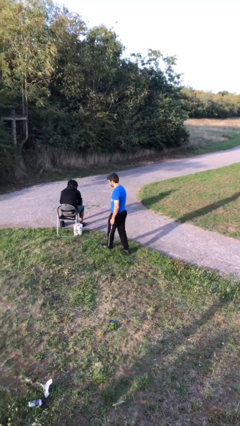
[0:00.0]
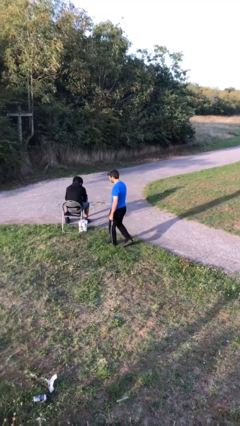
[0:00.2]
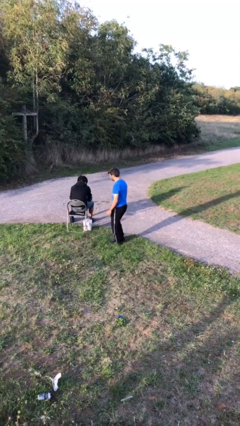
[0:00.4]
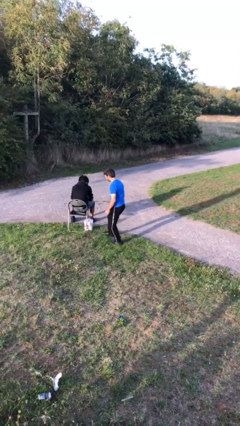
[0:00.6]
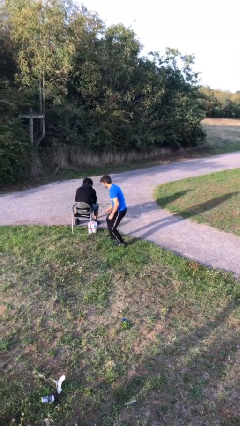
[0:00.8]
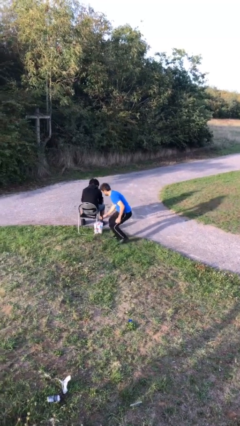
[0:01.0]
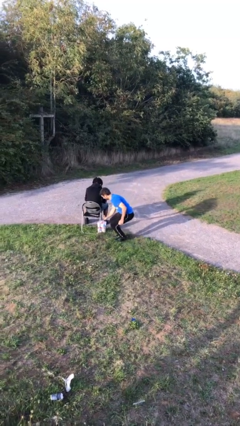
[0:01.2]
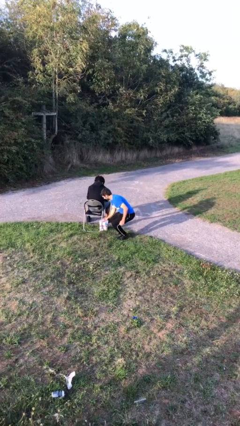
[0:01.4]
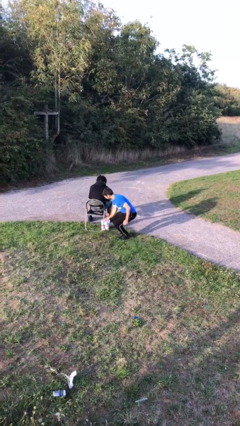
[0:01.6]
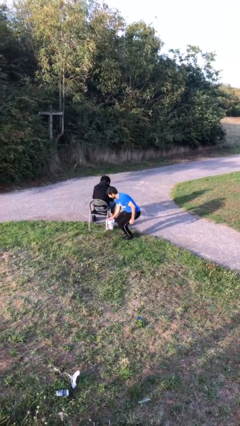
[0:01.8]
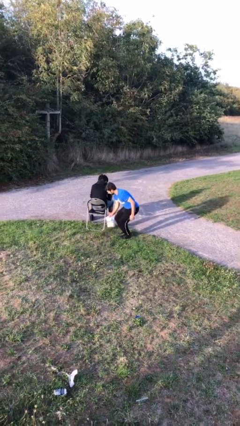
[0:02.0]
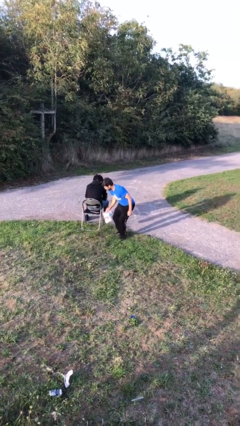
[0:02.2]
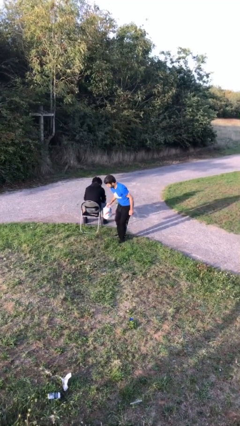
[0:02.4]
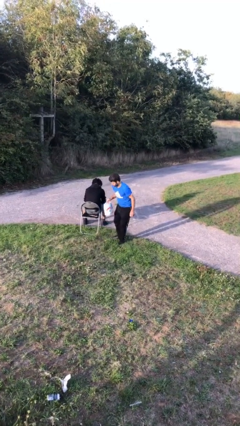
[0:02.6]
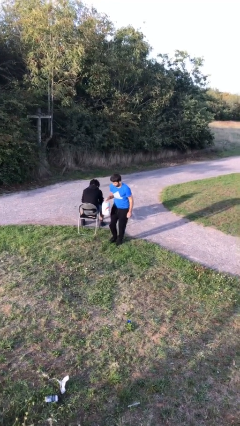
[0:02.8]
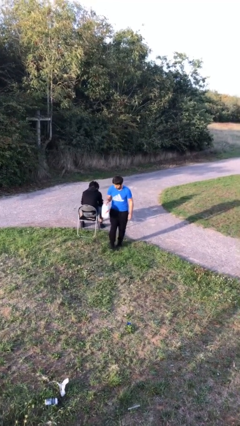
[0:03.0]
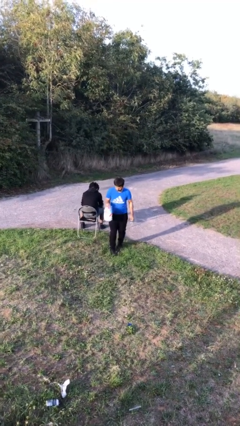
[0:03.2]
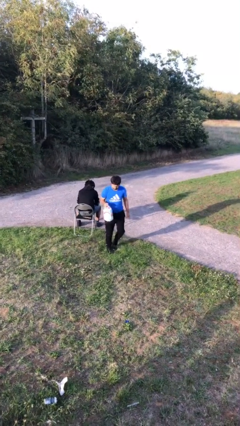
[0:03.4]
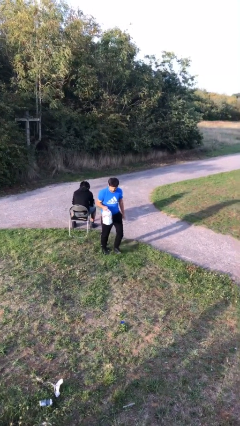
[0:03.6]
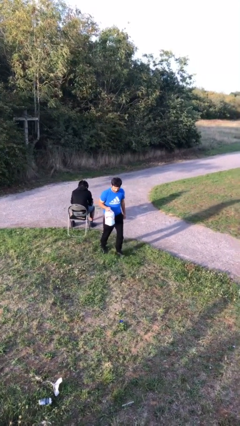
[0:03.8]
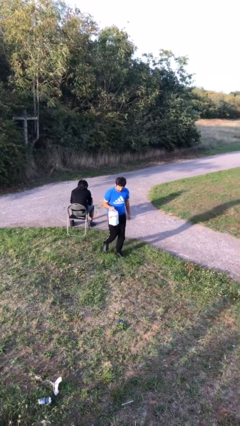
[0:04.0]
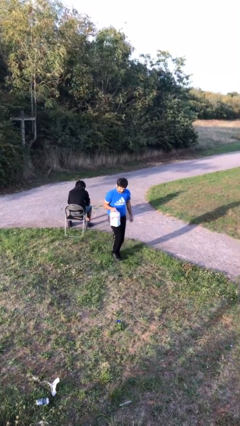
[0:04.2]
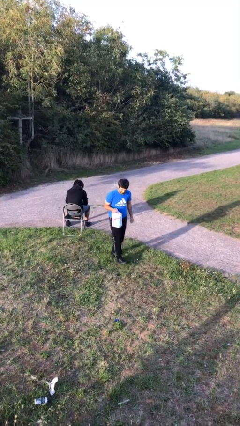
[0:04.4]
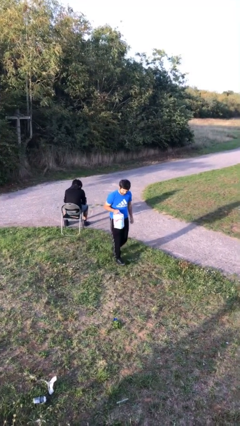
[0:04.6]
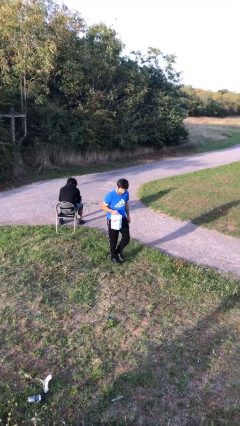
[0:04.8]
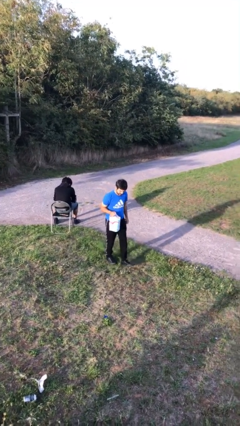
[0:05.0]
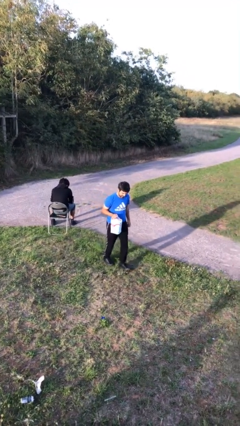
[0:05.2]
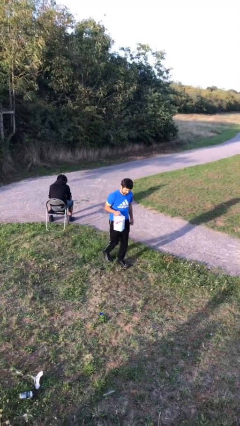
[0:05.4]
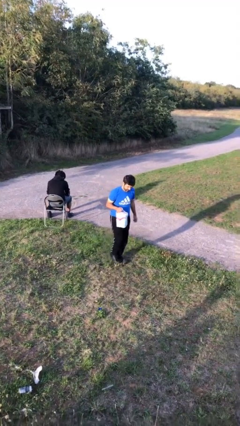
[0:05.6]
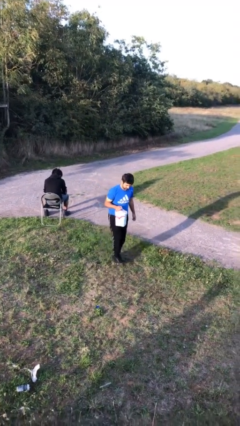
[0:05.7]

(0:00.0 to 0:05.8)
person steals object from person

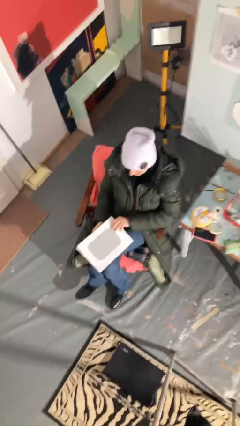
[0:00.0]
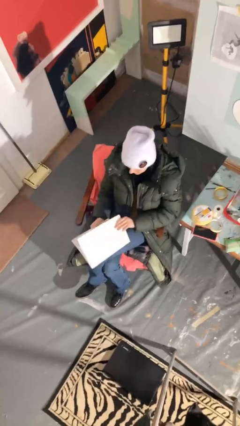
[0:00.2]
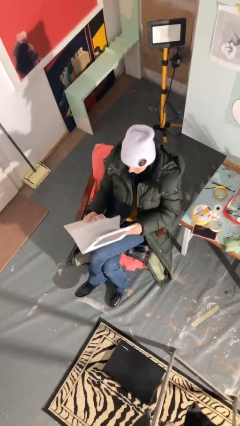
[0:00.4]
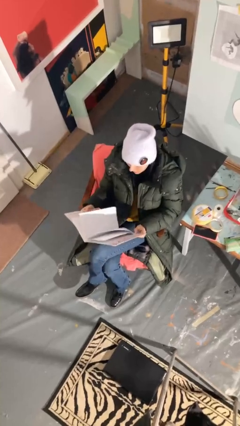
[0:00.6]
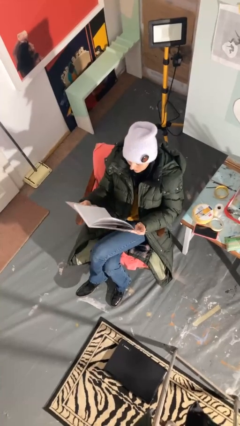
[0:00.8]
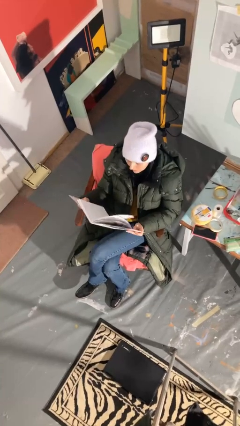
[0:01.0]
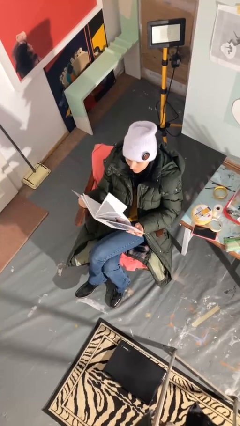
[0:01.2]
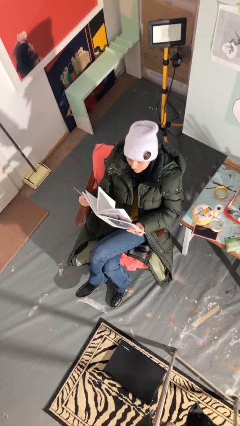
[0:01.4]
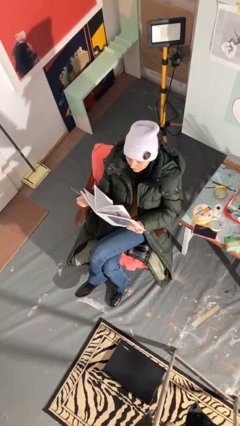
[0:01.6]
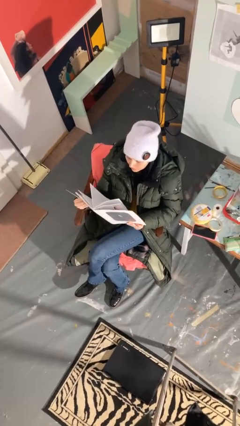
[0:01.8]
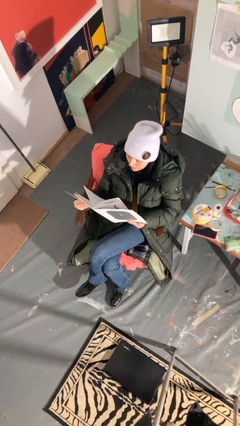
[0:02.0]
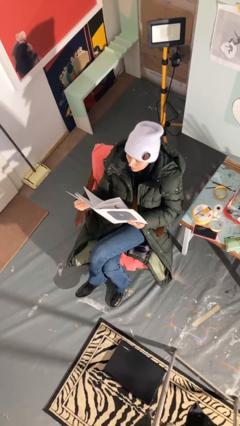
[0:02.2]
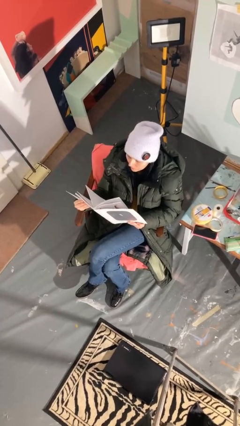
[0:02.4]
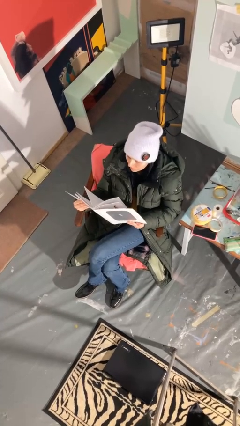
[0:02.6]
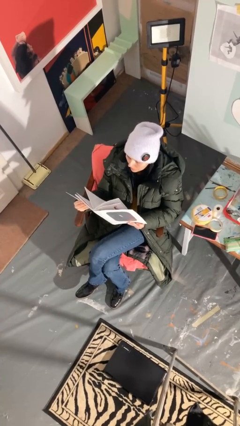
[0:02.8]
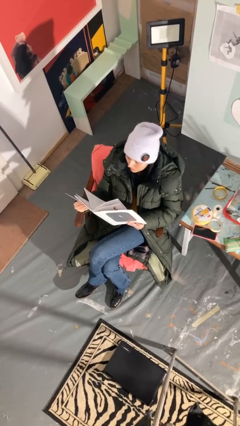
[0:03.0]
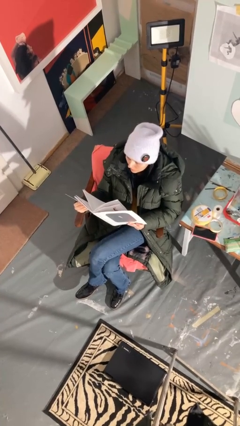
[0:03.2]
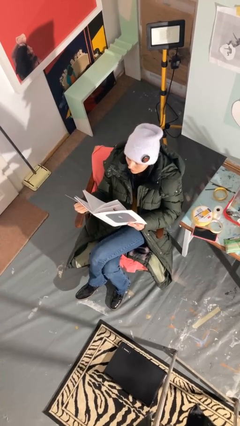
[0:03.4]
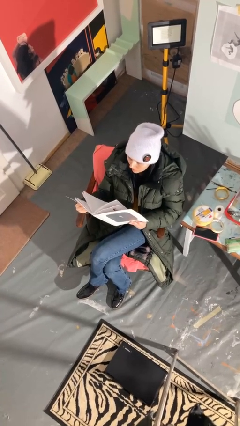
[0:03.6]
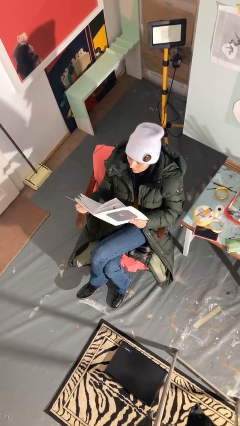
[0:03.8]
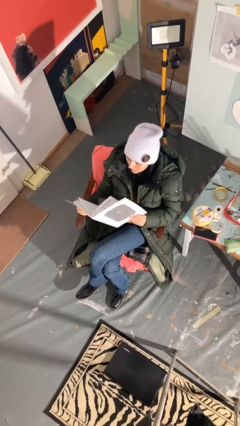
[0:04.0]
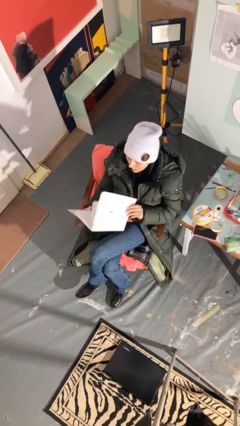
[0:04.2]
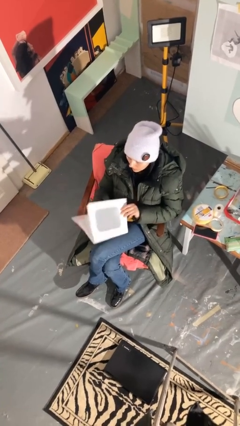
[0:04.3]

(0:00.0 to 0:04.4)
person reads document

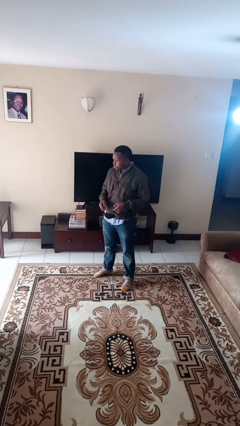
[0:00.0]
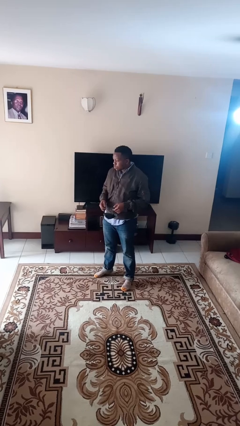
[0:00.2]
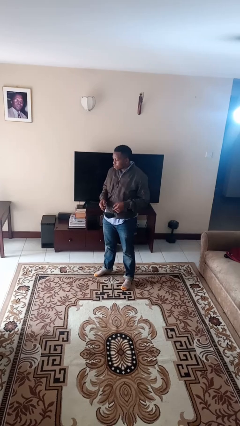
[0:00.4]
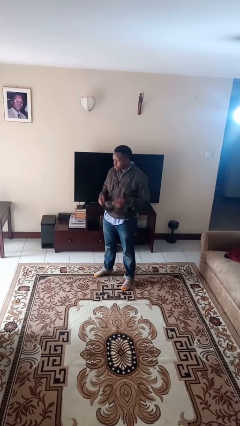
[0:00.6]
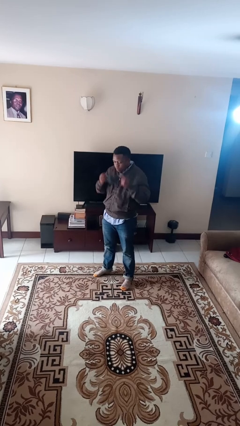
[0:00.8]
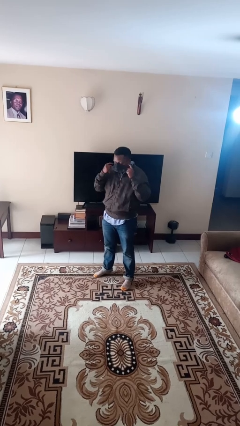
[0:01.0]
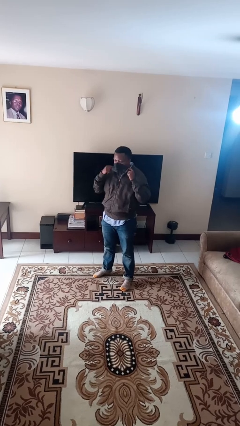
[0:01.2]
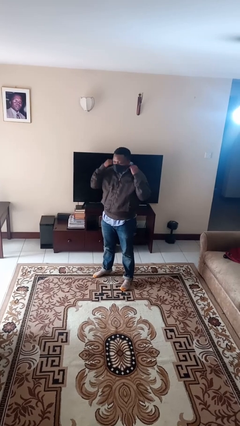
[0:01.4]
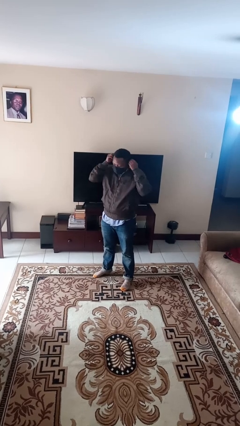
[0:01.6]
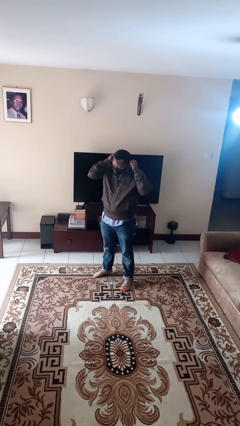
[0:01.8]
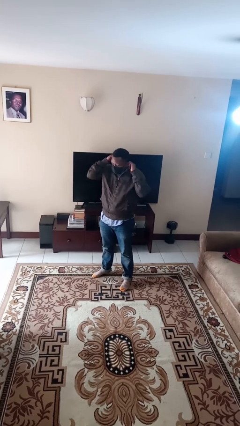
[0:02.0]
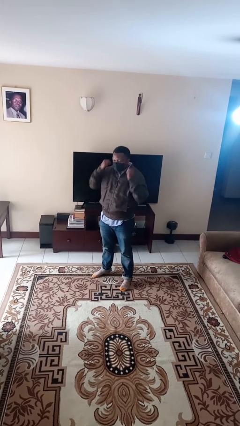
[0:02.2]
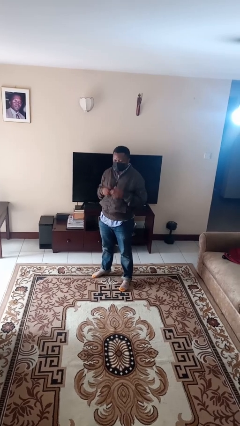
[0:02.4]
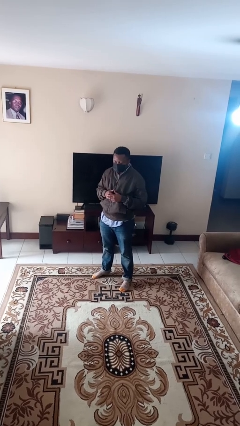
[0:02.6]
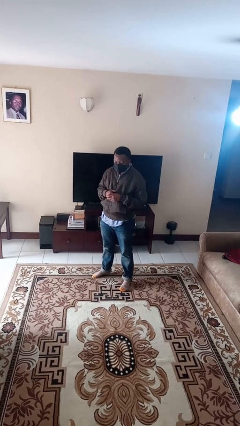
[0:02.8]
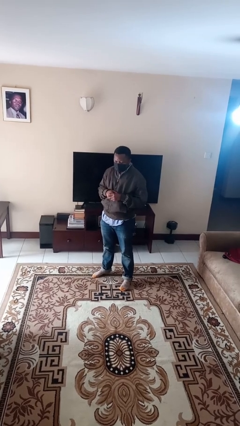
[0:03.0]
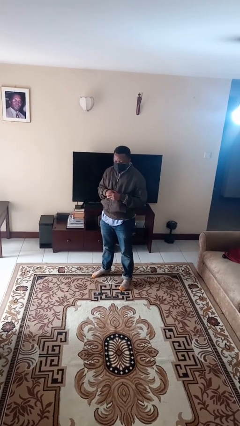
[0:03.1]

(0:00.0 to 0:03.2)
person puts on facemask

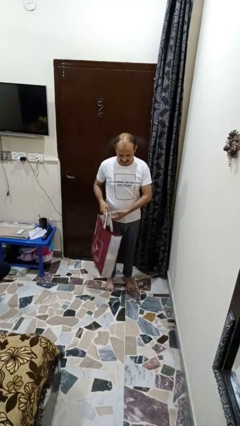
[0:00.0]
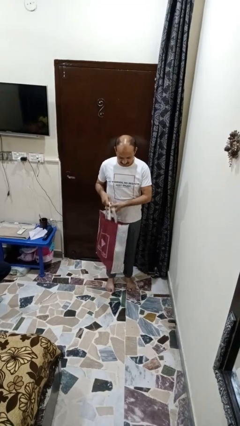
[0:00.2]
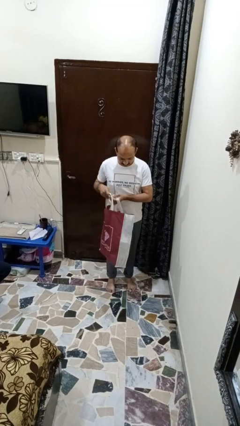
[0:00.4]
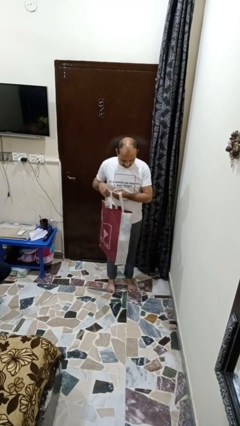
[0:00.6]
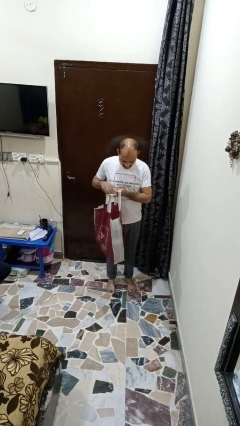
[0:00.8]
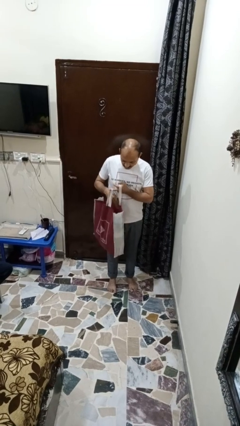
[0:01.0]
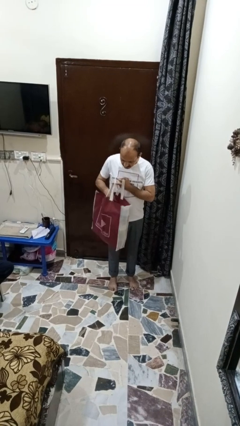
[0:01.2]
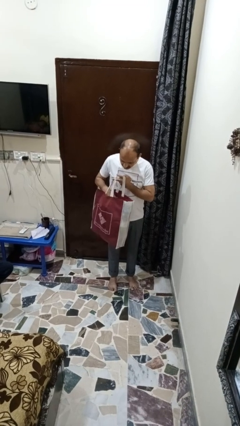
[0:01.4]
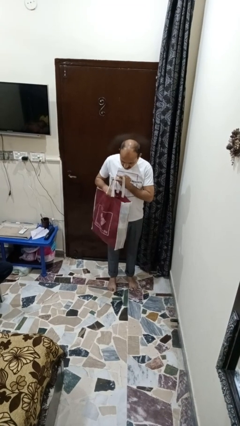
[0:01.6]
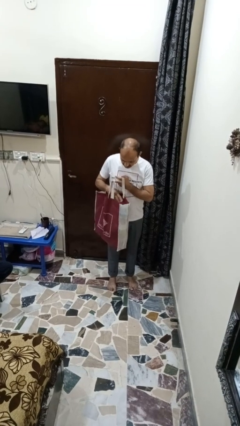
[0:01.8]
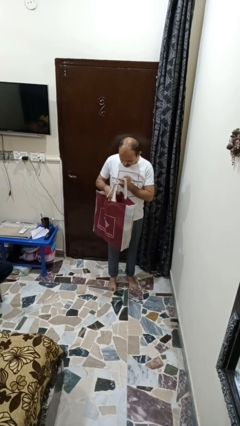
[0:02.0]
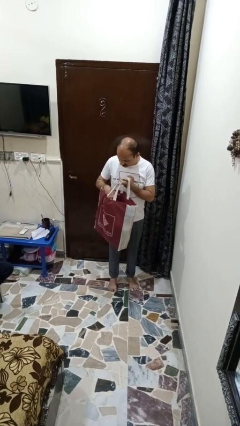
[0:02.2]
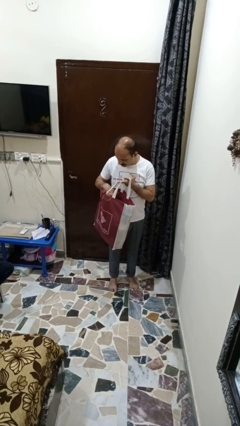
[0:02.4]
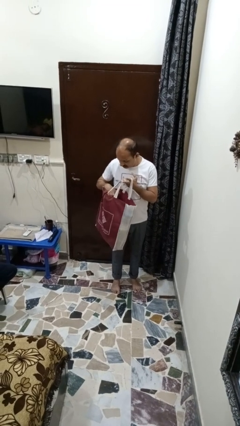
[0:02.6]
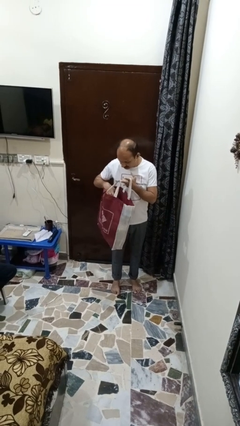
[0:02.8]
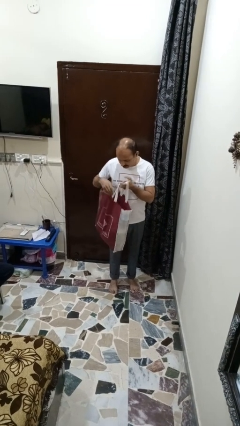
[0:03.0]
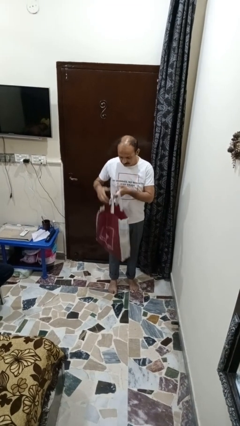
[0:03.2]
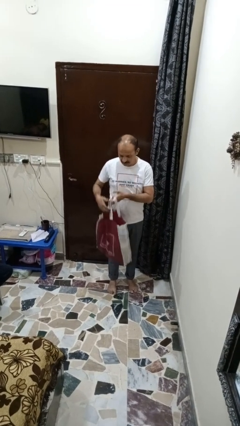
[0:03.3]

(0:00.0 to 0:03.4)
person searches in bag

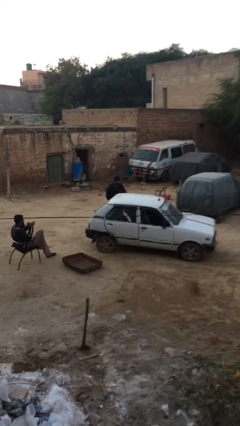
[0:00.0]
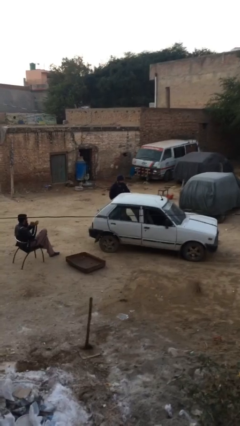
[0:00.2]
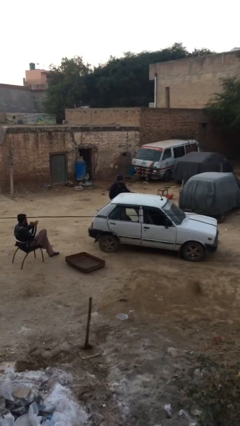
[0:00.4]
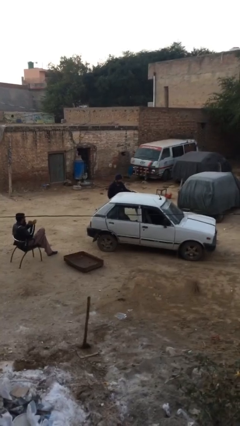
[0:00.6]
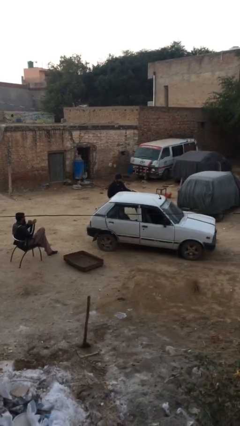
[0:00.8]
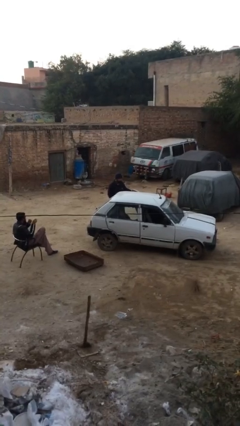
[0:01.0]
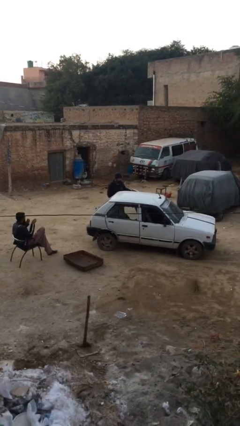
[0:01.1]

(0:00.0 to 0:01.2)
person opens car door

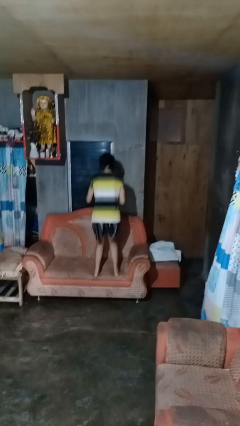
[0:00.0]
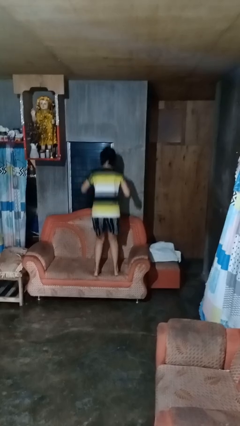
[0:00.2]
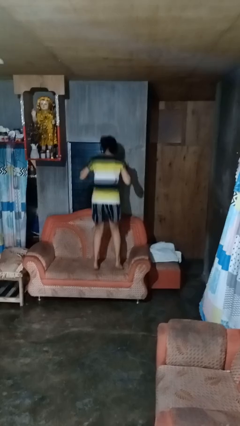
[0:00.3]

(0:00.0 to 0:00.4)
person jumps on couch
